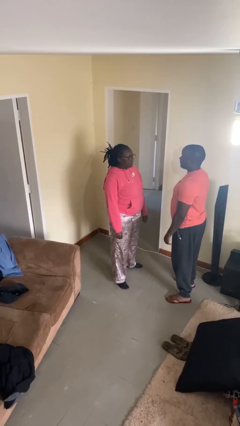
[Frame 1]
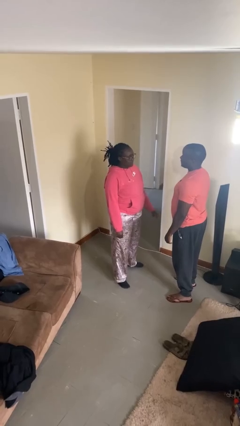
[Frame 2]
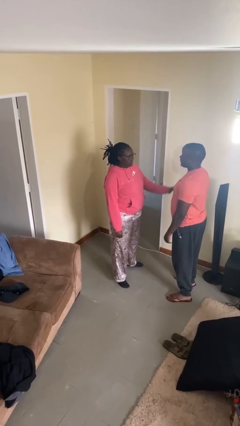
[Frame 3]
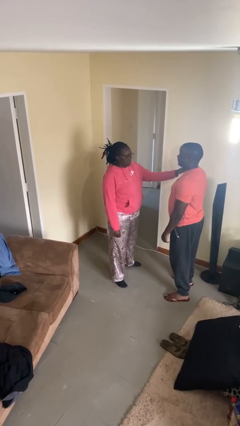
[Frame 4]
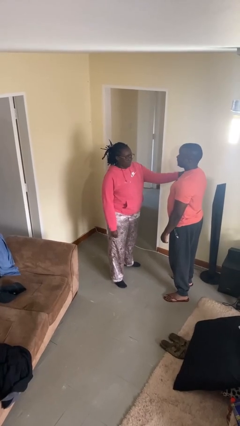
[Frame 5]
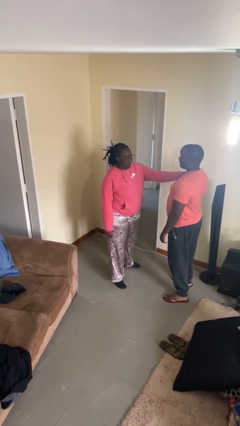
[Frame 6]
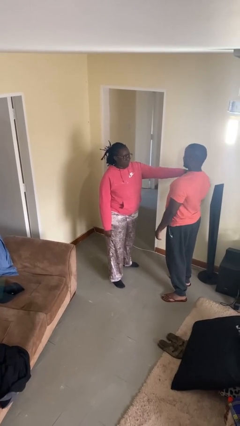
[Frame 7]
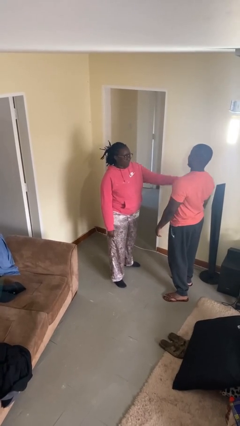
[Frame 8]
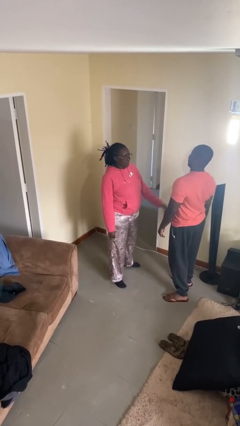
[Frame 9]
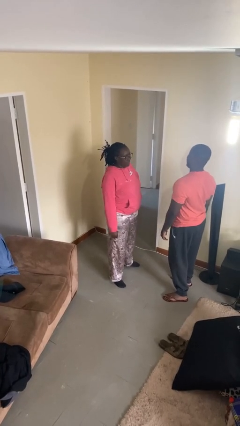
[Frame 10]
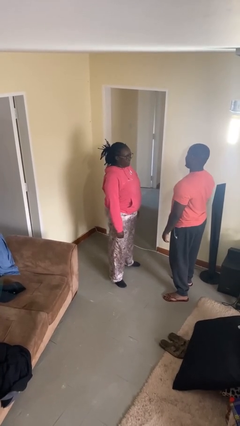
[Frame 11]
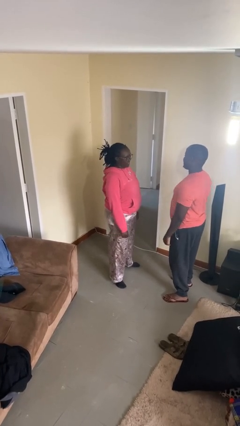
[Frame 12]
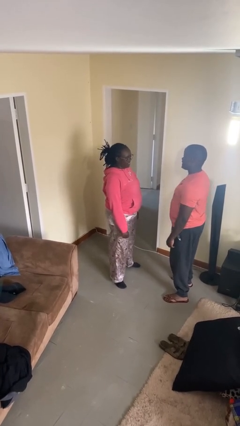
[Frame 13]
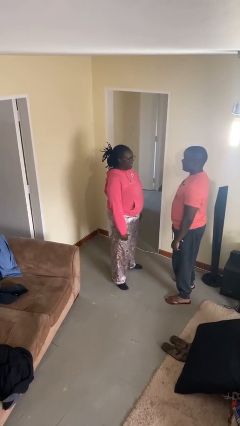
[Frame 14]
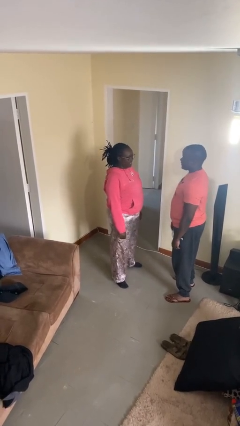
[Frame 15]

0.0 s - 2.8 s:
person shoves person

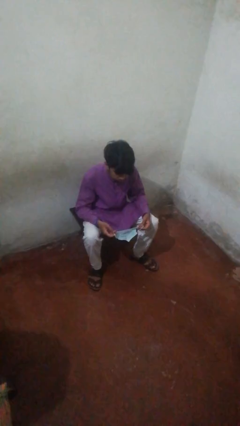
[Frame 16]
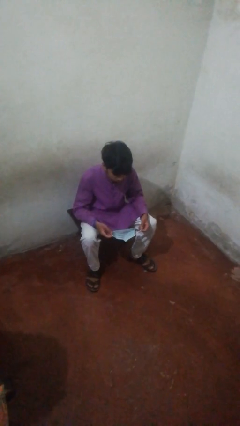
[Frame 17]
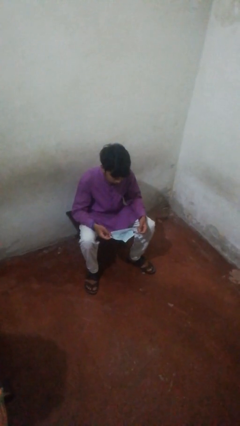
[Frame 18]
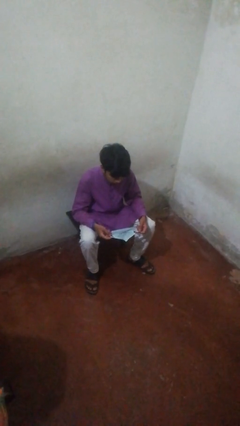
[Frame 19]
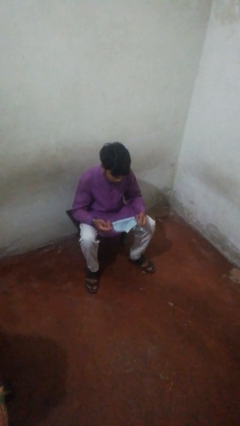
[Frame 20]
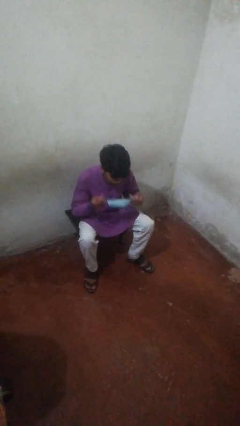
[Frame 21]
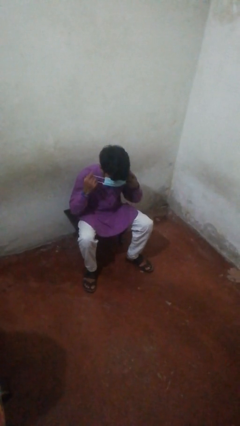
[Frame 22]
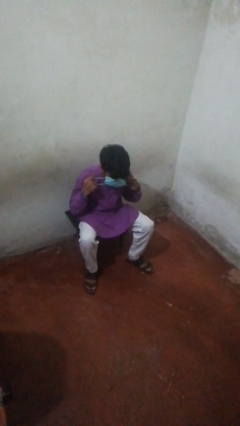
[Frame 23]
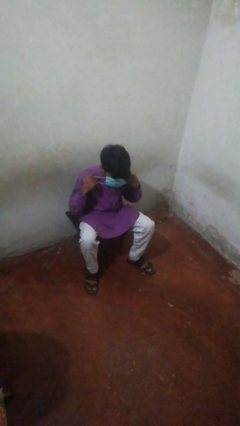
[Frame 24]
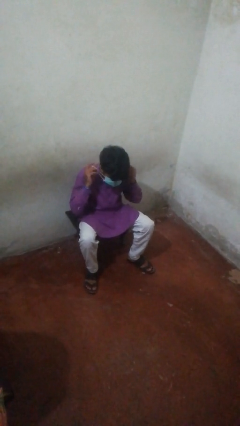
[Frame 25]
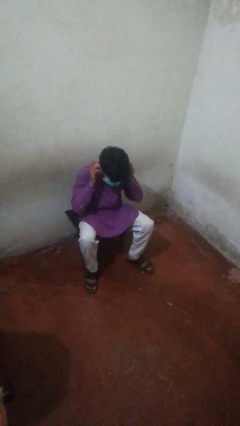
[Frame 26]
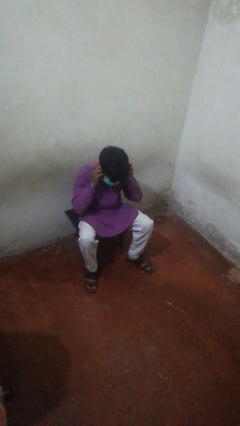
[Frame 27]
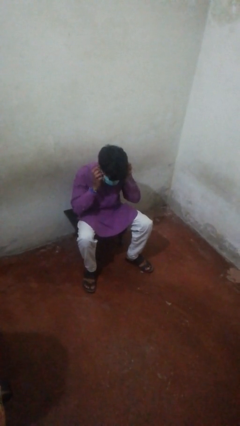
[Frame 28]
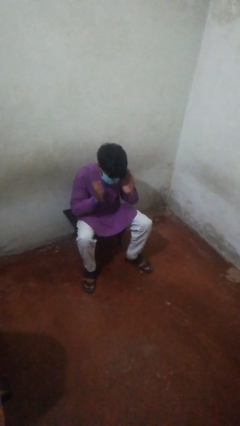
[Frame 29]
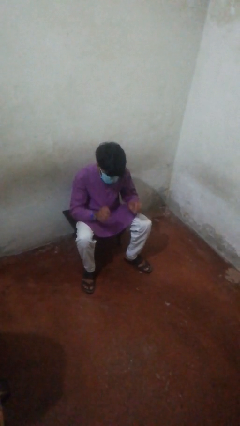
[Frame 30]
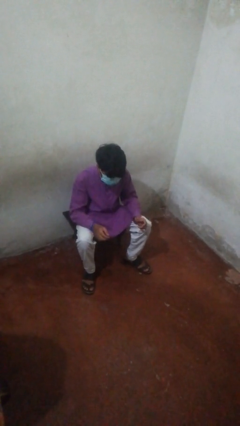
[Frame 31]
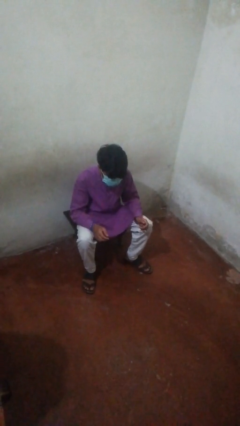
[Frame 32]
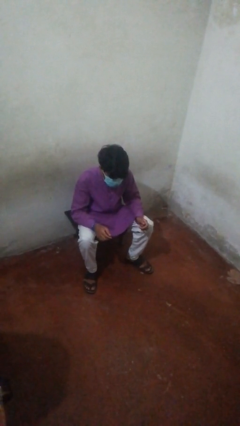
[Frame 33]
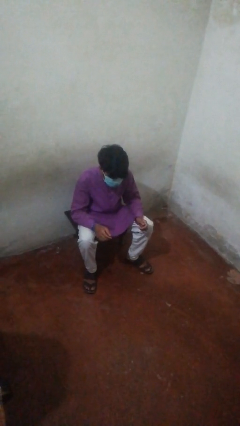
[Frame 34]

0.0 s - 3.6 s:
person puts on facemask

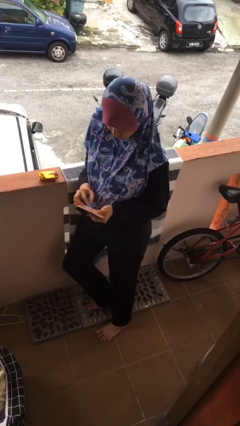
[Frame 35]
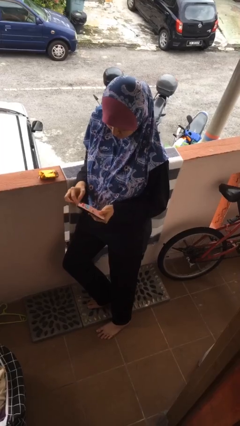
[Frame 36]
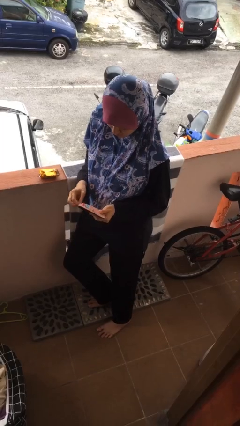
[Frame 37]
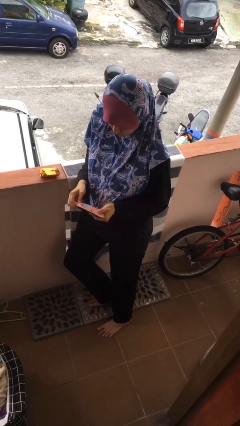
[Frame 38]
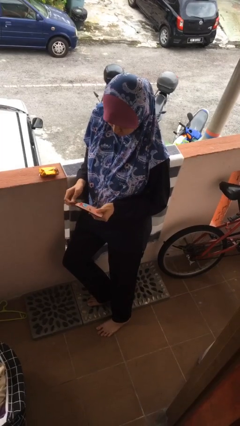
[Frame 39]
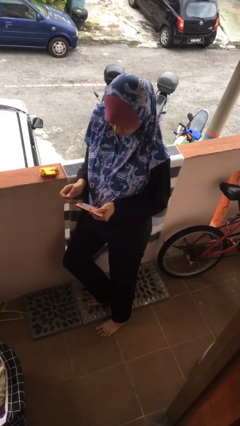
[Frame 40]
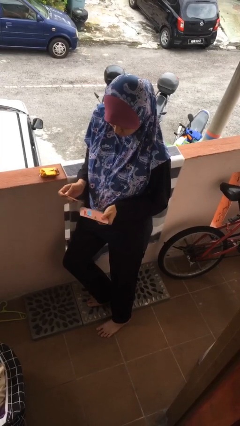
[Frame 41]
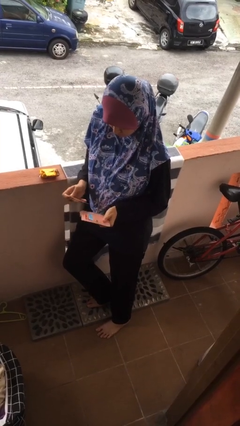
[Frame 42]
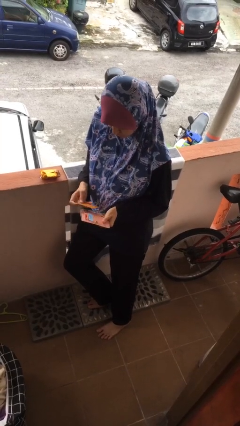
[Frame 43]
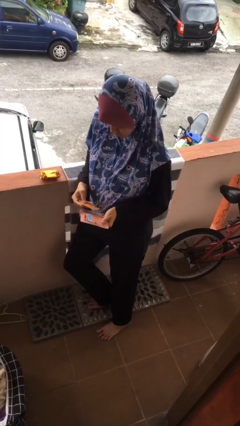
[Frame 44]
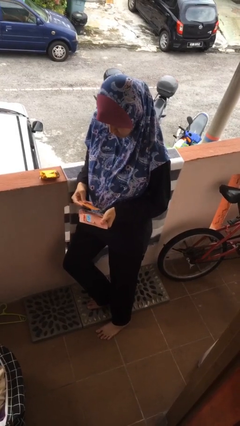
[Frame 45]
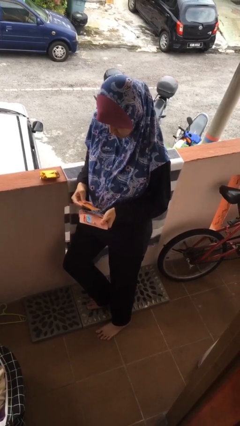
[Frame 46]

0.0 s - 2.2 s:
person takes object from purse

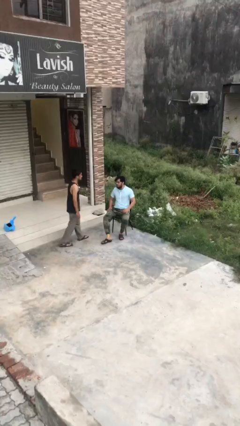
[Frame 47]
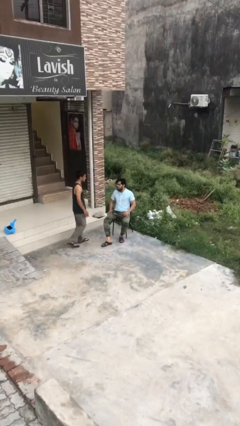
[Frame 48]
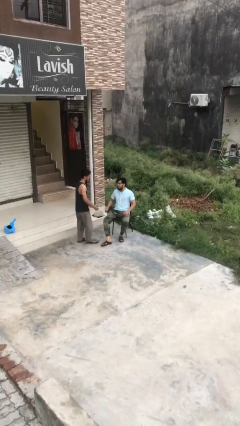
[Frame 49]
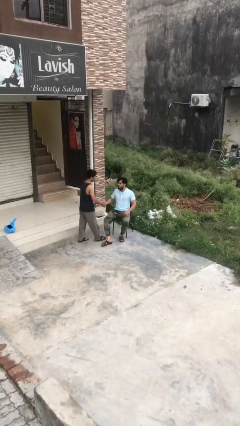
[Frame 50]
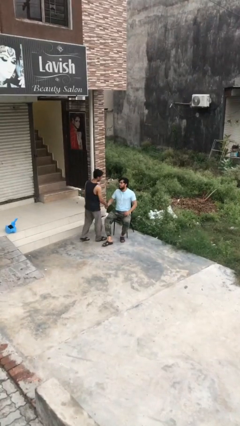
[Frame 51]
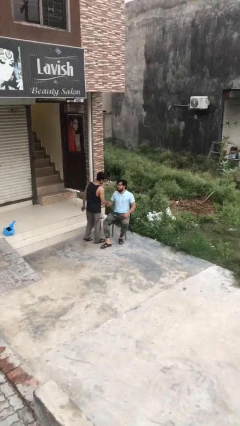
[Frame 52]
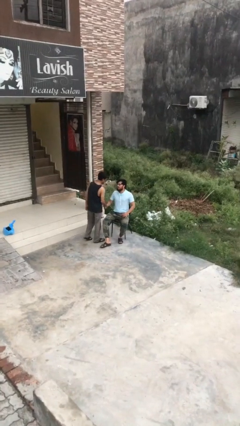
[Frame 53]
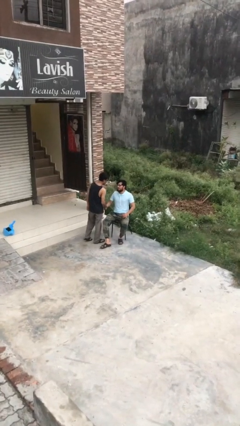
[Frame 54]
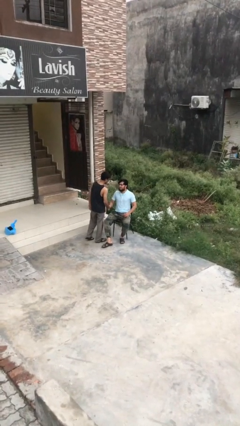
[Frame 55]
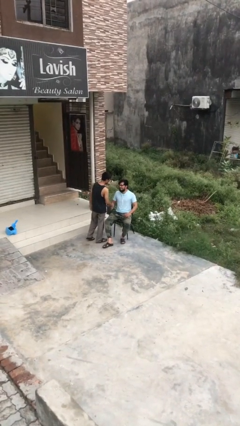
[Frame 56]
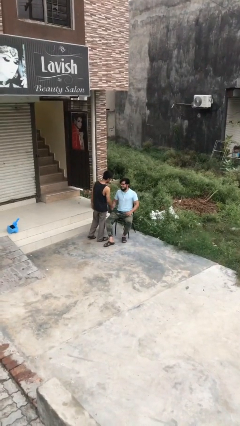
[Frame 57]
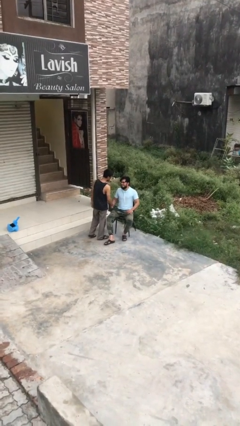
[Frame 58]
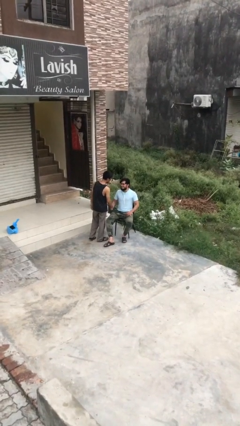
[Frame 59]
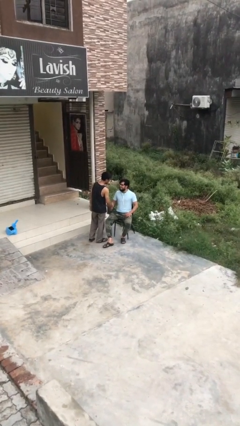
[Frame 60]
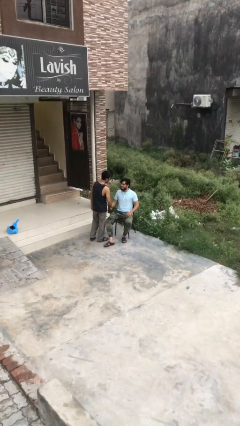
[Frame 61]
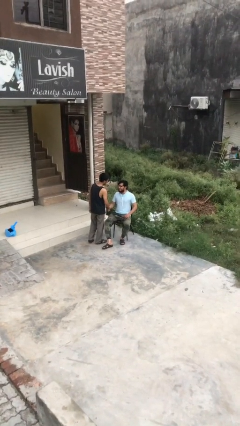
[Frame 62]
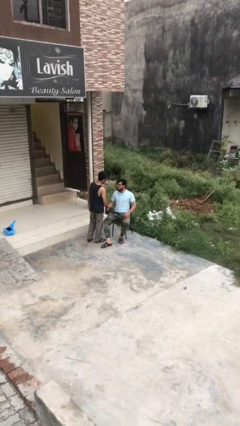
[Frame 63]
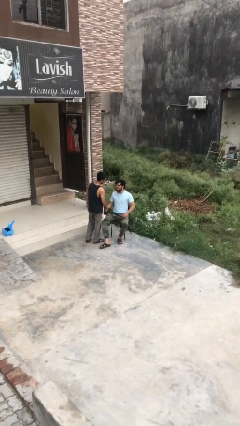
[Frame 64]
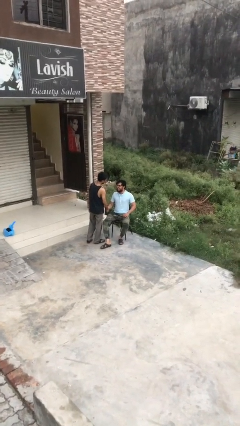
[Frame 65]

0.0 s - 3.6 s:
person shakes hand

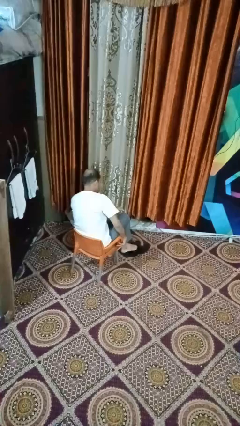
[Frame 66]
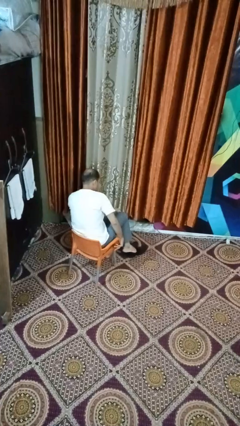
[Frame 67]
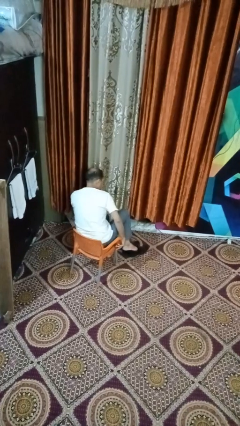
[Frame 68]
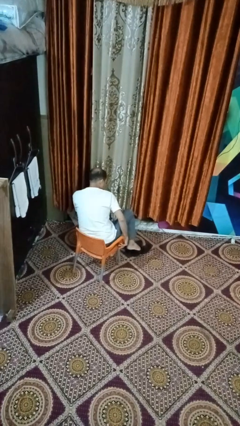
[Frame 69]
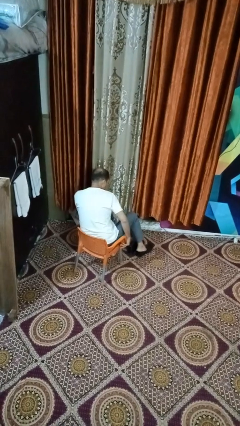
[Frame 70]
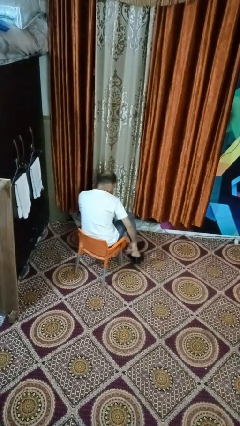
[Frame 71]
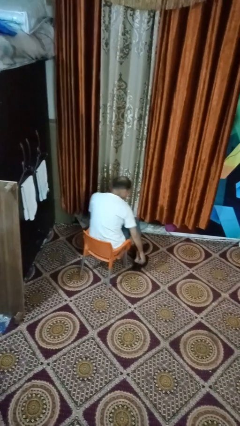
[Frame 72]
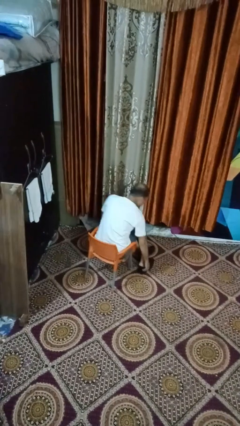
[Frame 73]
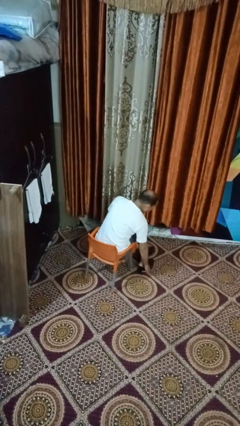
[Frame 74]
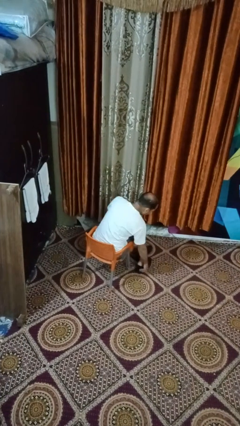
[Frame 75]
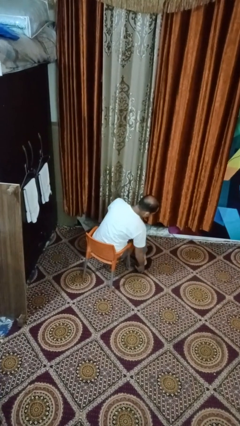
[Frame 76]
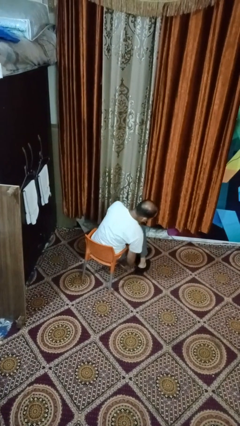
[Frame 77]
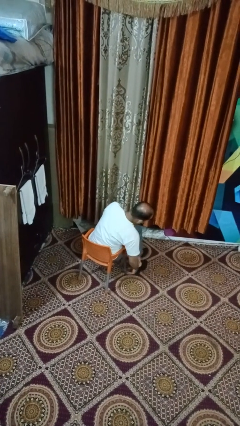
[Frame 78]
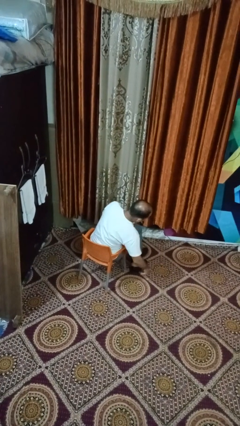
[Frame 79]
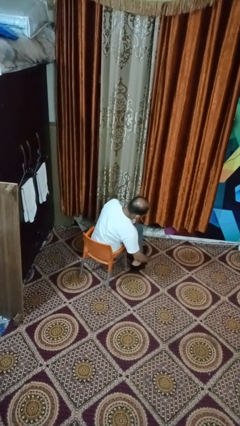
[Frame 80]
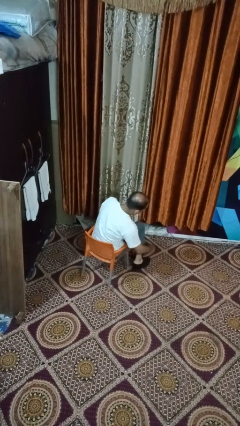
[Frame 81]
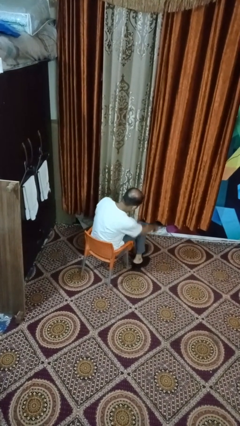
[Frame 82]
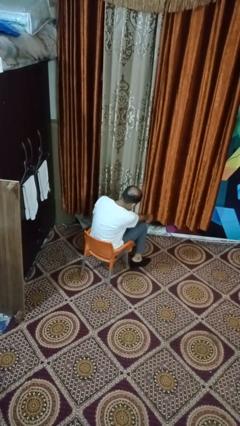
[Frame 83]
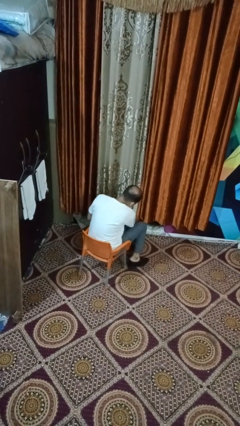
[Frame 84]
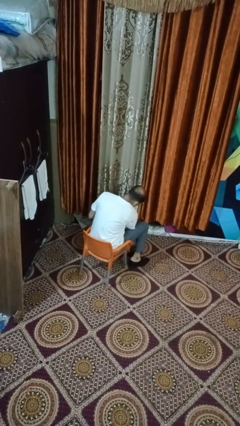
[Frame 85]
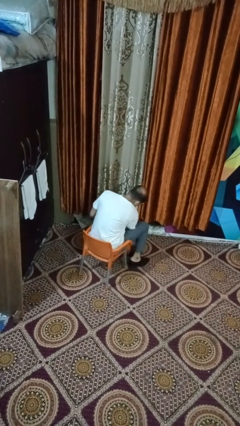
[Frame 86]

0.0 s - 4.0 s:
person puts on shoes

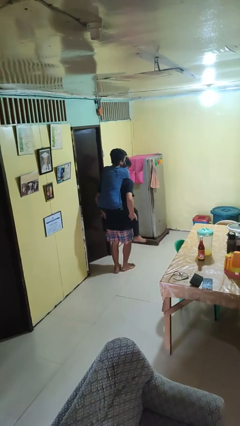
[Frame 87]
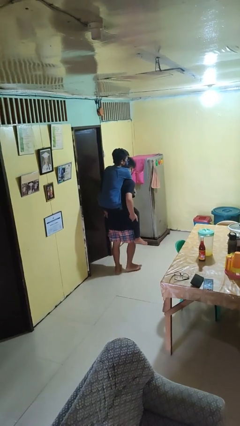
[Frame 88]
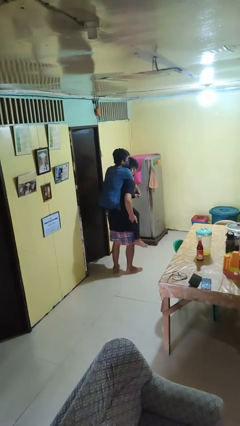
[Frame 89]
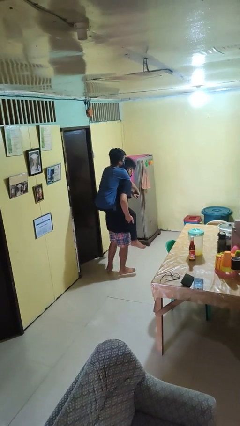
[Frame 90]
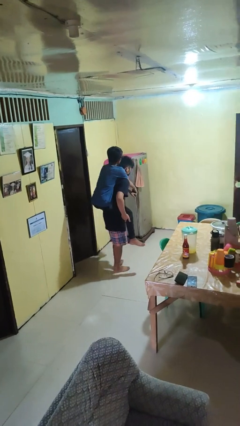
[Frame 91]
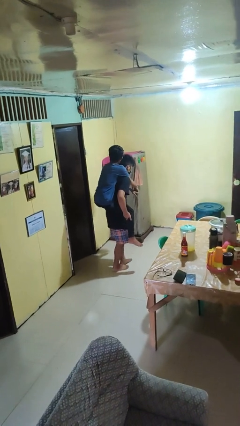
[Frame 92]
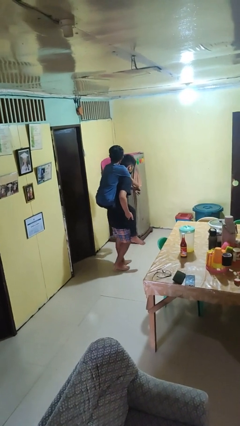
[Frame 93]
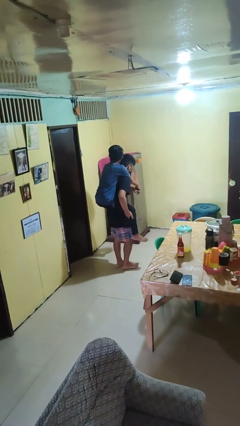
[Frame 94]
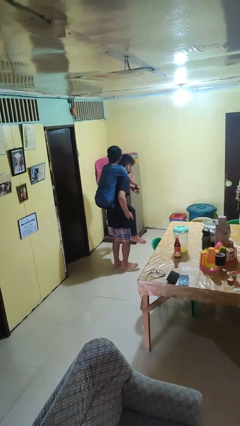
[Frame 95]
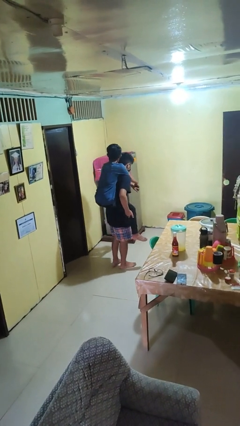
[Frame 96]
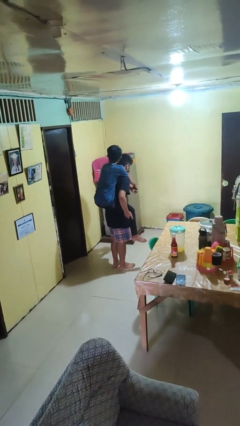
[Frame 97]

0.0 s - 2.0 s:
person carries person on back
